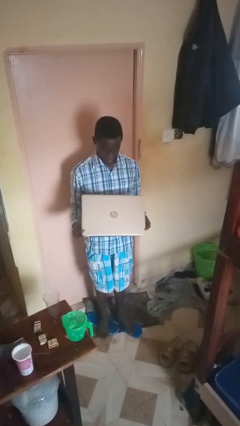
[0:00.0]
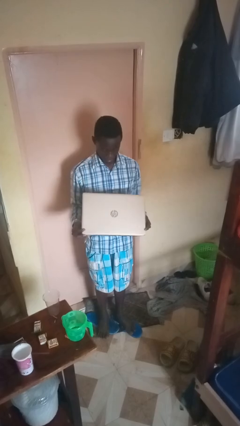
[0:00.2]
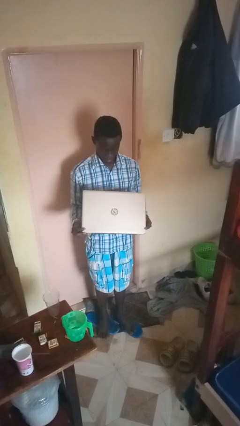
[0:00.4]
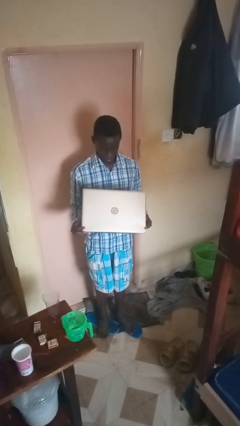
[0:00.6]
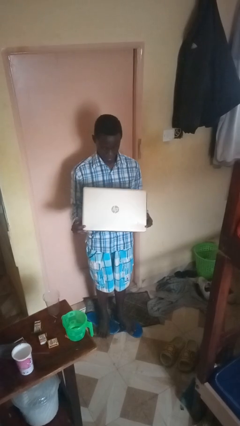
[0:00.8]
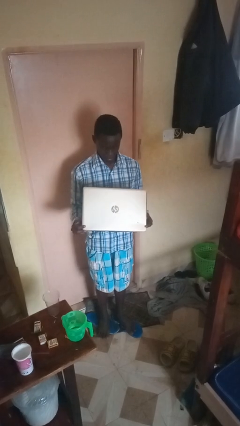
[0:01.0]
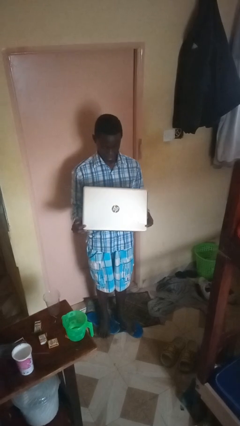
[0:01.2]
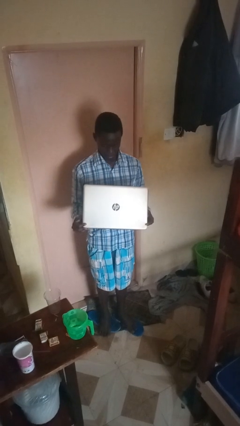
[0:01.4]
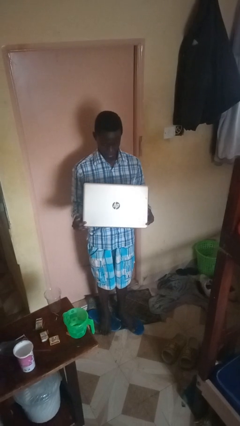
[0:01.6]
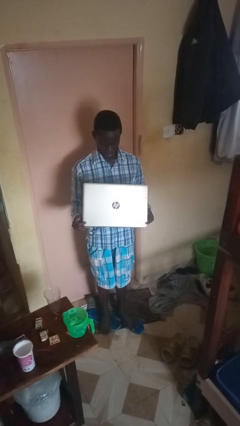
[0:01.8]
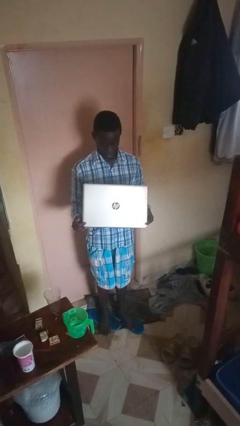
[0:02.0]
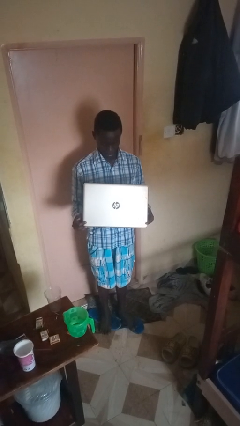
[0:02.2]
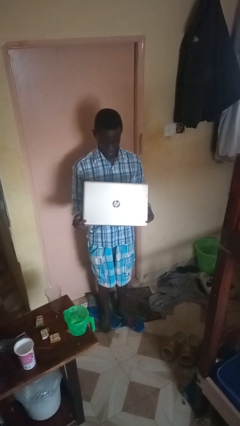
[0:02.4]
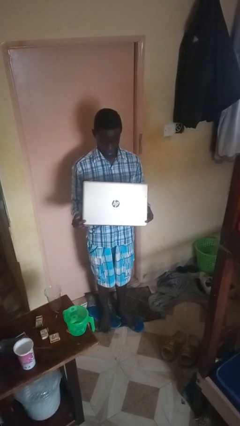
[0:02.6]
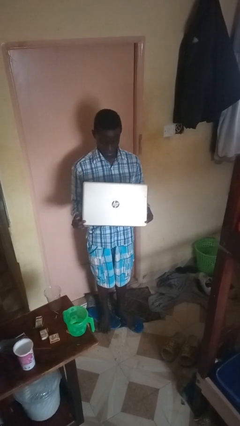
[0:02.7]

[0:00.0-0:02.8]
person opens laptop

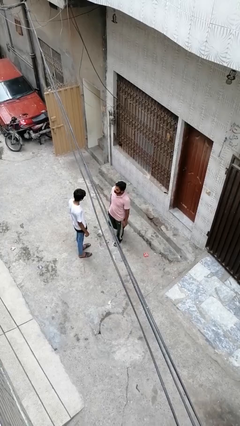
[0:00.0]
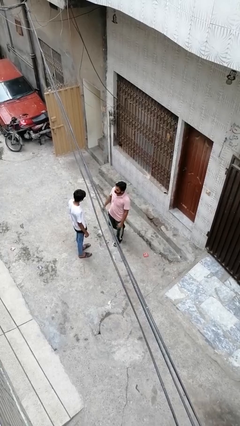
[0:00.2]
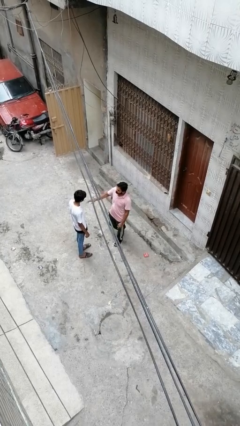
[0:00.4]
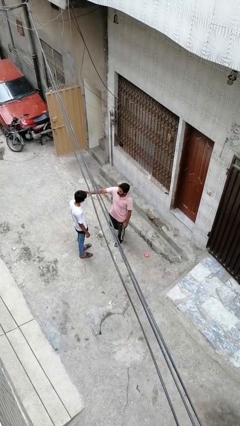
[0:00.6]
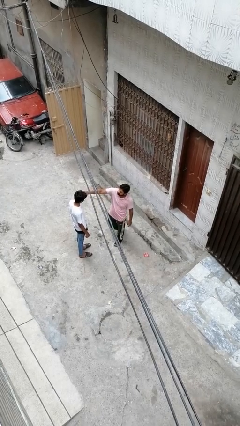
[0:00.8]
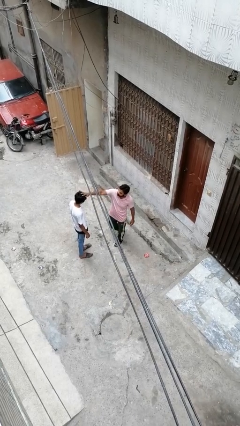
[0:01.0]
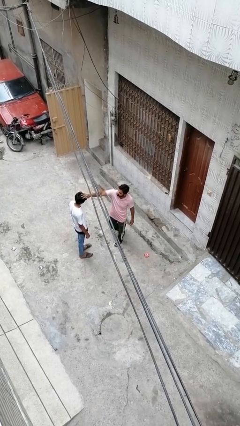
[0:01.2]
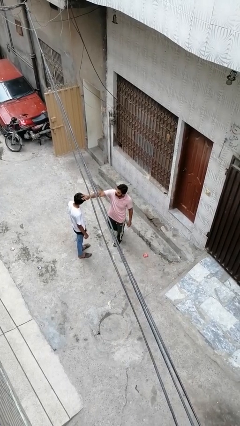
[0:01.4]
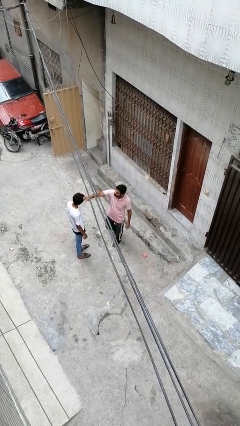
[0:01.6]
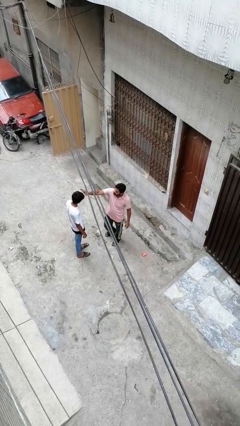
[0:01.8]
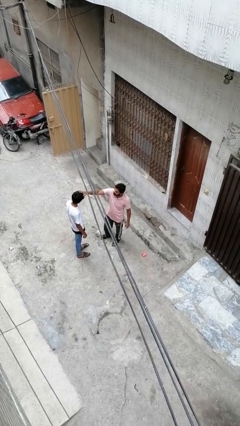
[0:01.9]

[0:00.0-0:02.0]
person grabs person by hair

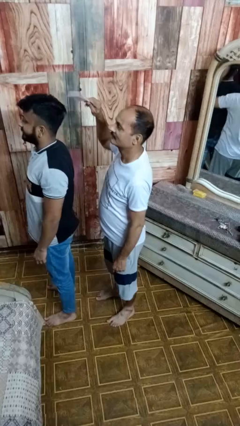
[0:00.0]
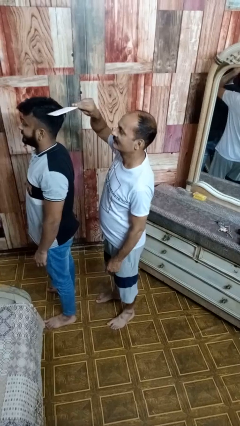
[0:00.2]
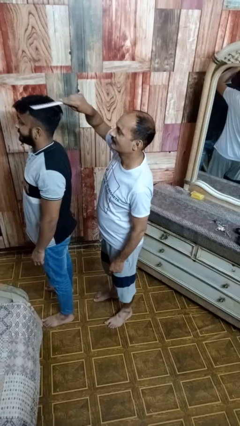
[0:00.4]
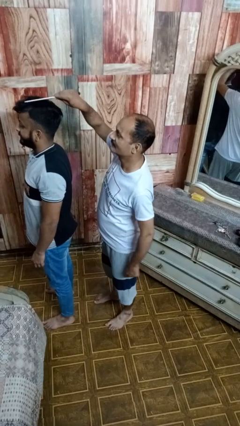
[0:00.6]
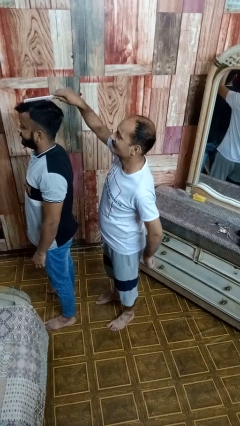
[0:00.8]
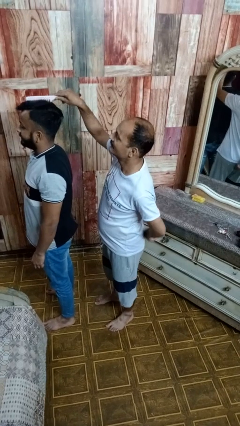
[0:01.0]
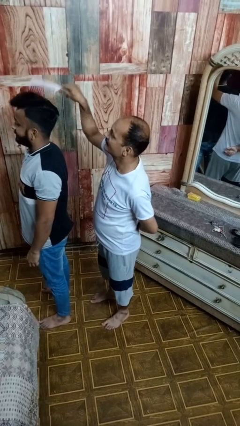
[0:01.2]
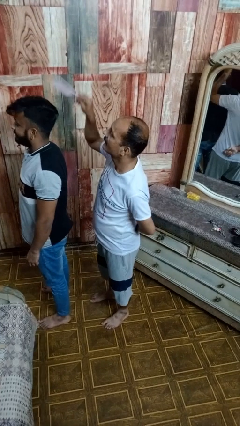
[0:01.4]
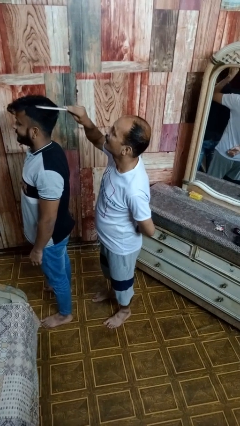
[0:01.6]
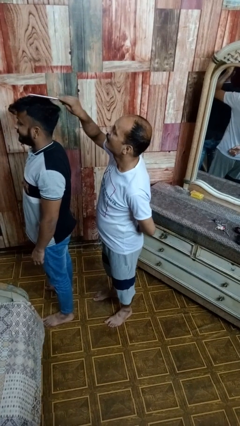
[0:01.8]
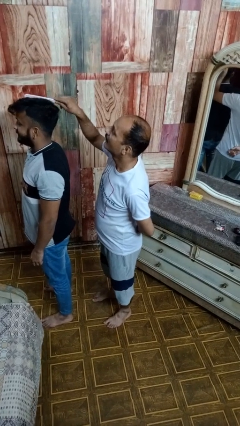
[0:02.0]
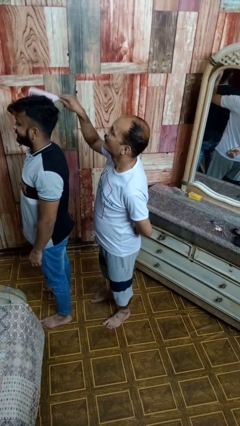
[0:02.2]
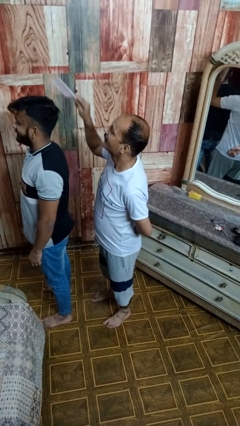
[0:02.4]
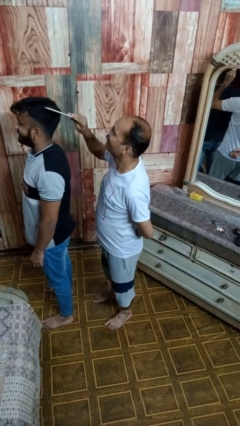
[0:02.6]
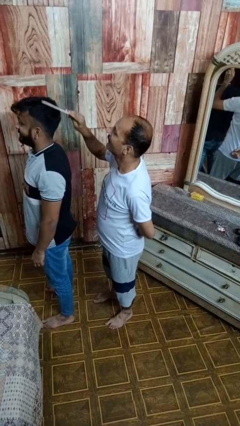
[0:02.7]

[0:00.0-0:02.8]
person brushes hair of person

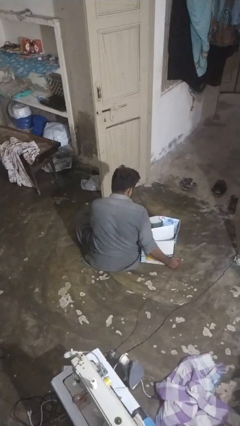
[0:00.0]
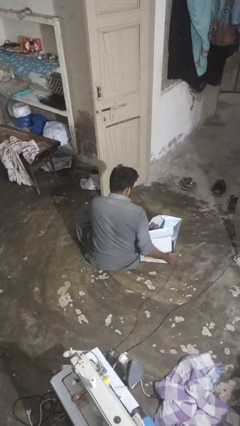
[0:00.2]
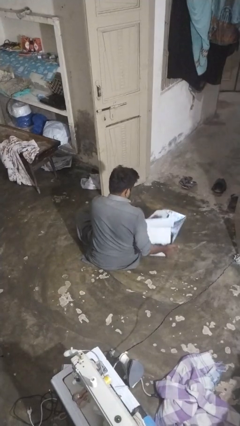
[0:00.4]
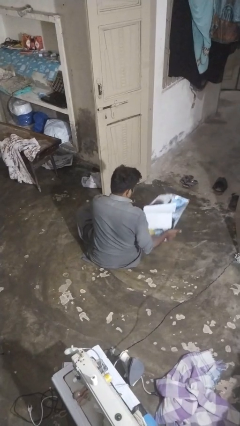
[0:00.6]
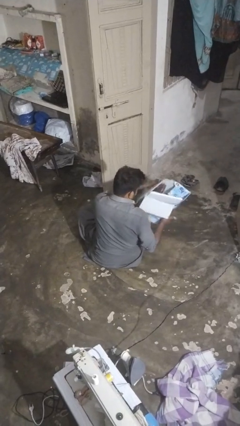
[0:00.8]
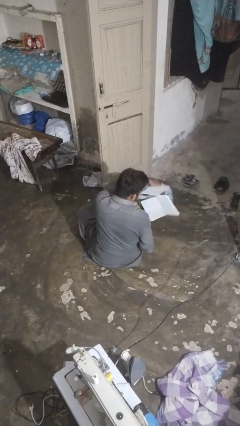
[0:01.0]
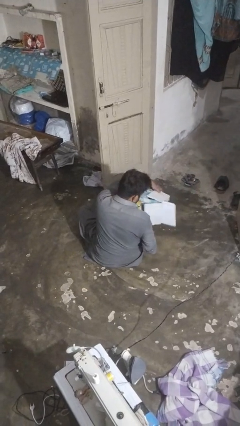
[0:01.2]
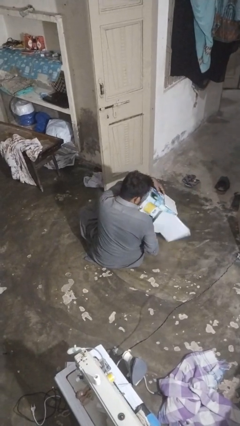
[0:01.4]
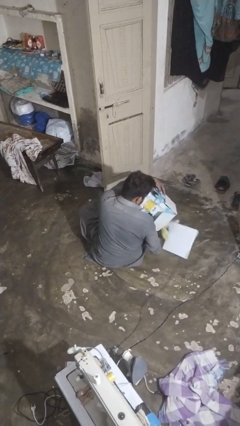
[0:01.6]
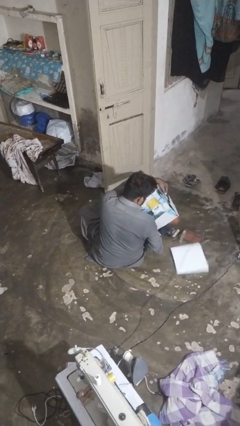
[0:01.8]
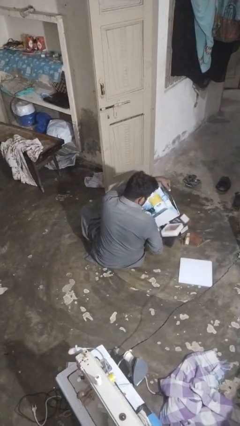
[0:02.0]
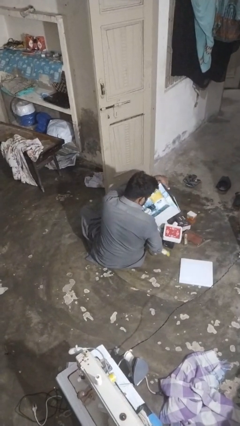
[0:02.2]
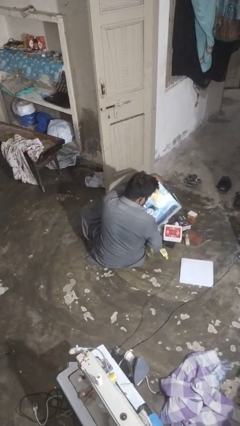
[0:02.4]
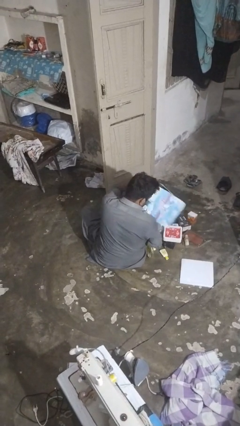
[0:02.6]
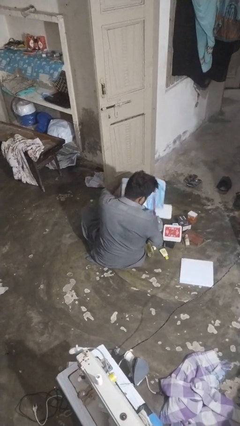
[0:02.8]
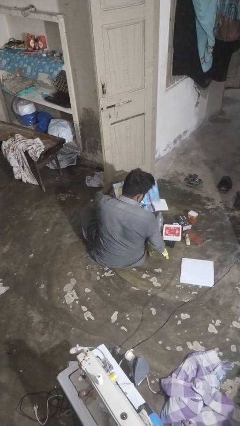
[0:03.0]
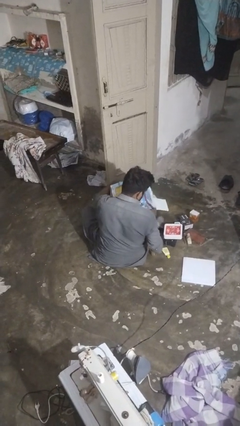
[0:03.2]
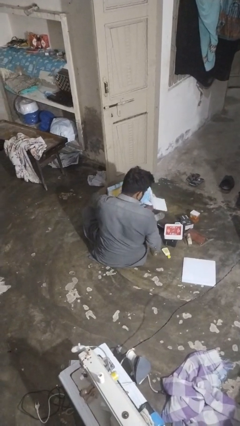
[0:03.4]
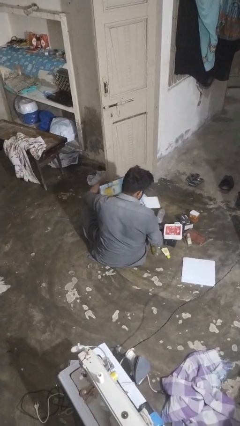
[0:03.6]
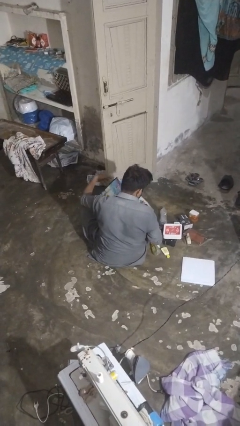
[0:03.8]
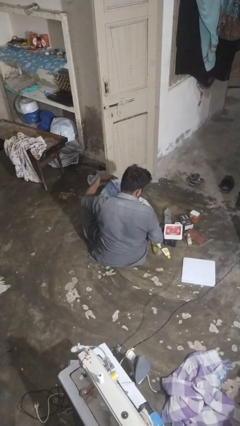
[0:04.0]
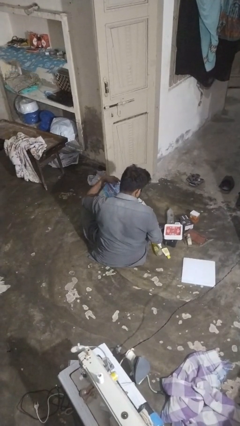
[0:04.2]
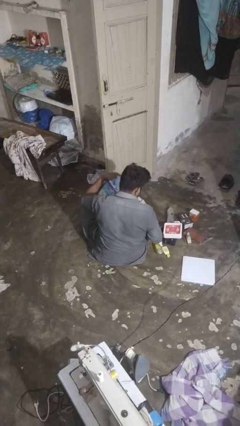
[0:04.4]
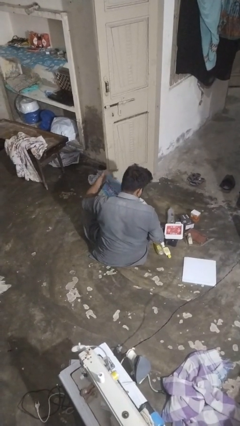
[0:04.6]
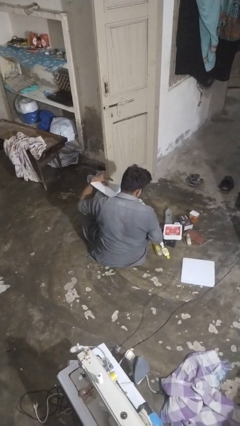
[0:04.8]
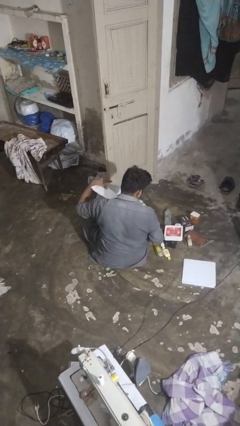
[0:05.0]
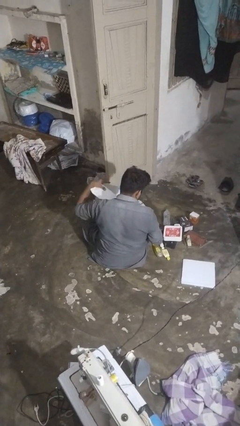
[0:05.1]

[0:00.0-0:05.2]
person unloads box onto floor

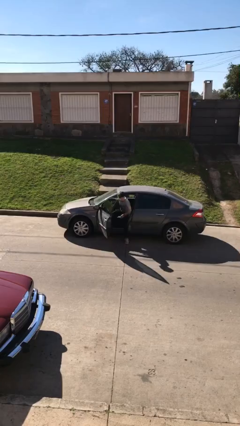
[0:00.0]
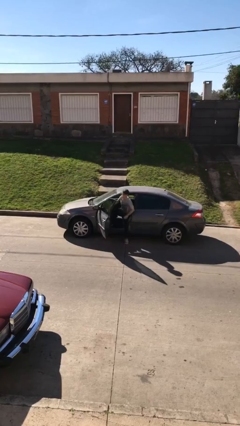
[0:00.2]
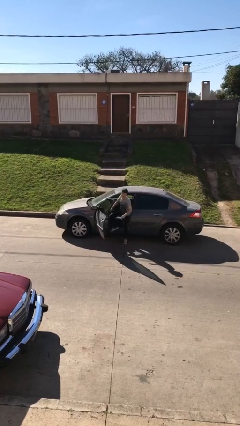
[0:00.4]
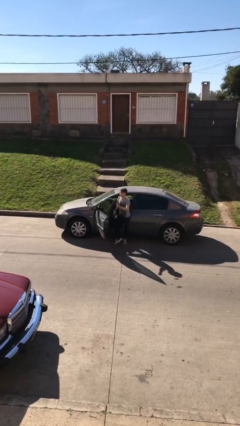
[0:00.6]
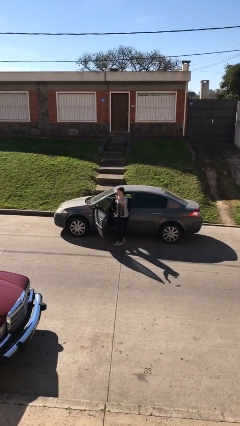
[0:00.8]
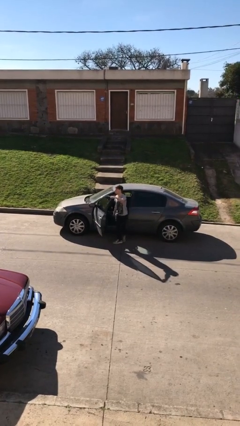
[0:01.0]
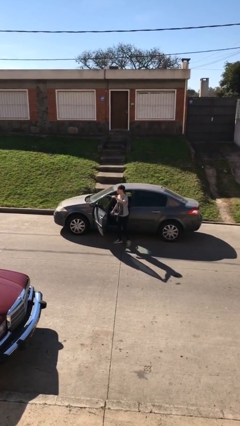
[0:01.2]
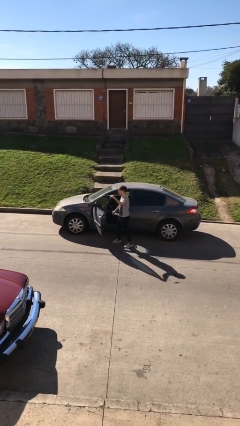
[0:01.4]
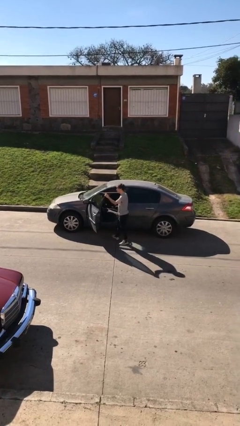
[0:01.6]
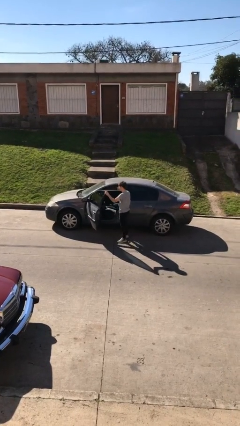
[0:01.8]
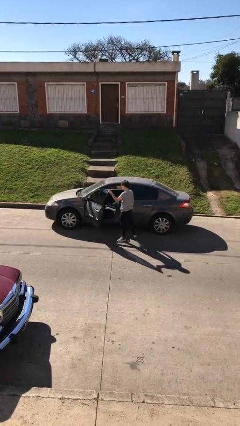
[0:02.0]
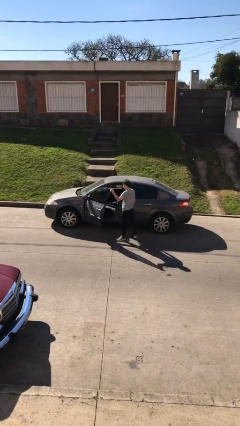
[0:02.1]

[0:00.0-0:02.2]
person exits car

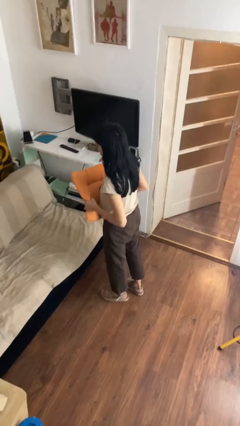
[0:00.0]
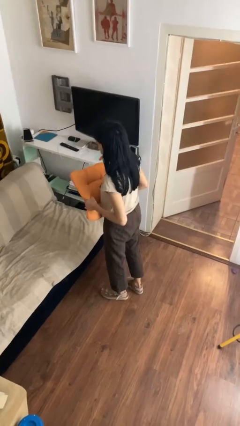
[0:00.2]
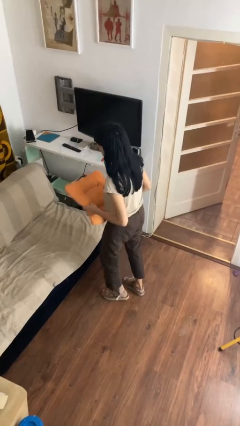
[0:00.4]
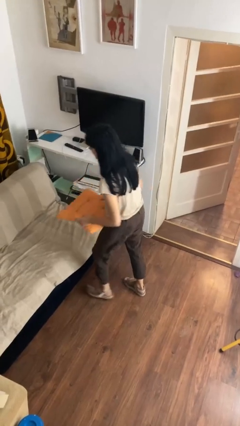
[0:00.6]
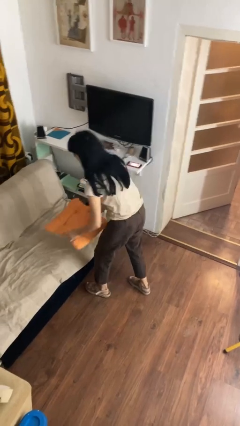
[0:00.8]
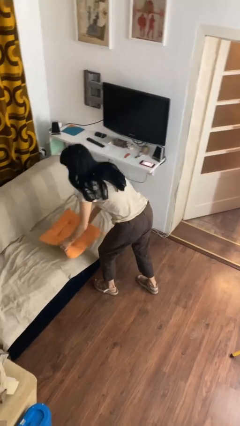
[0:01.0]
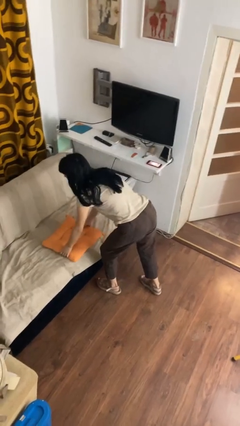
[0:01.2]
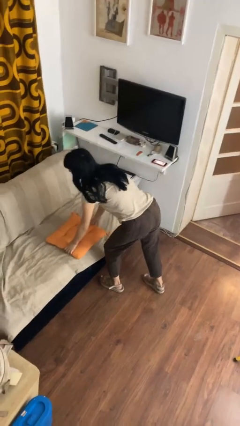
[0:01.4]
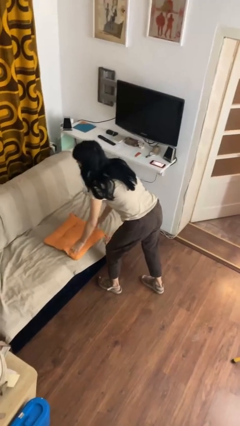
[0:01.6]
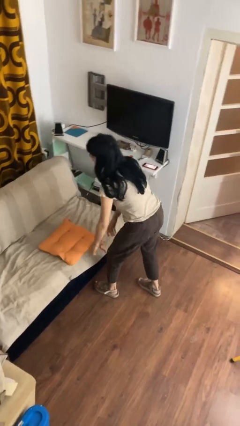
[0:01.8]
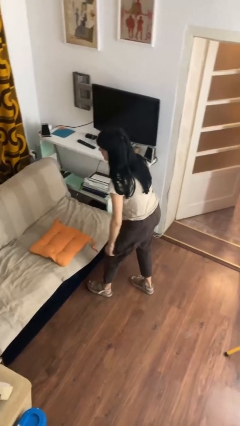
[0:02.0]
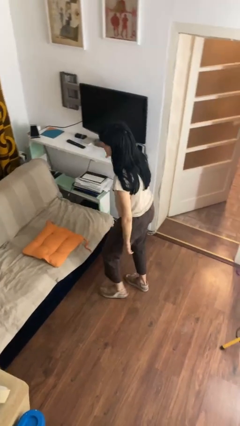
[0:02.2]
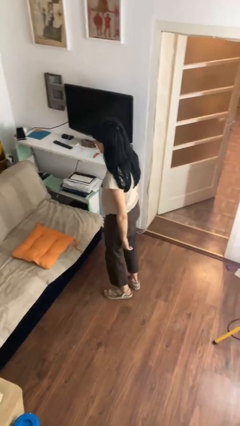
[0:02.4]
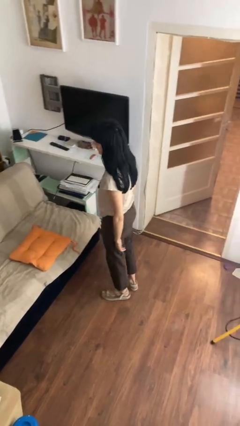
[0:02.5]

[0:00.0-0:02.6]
person puts down object on couch
